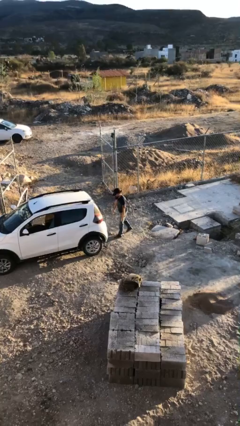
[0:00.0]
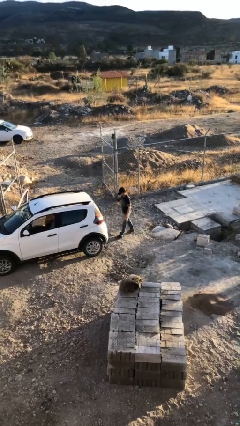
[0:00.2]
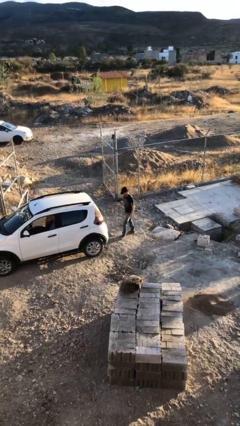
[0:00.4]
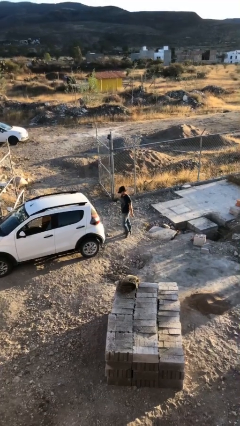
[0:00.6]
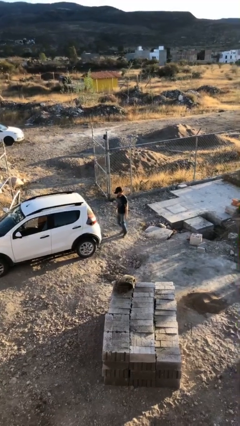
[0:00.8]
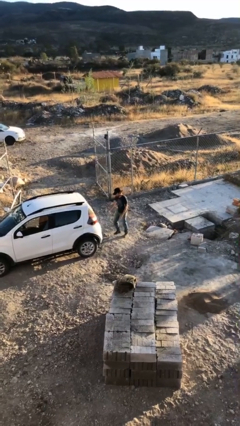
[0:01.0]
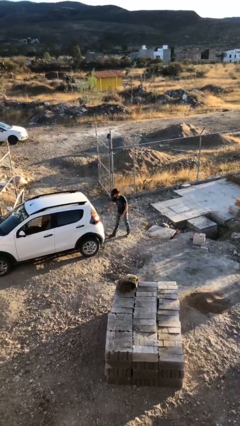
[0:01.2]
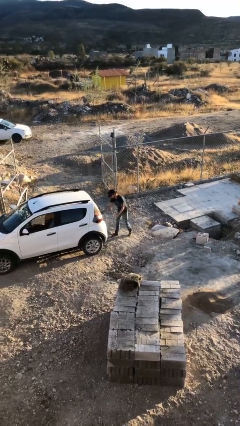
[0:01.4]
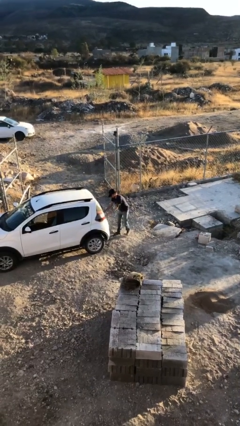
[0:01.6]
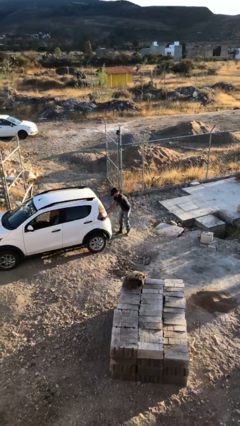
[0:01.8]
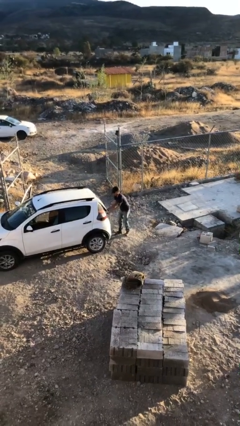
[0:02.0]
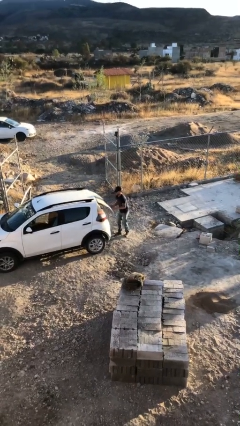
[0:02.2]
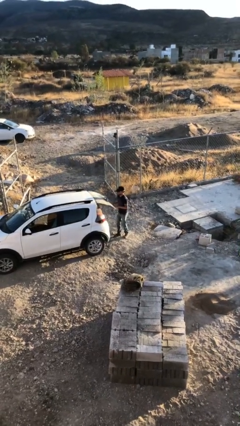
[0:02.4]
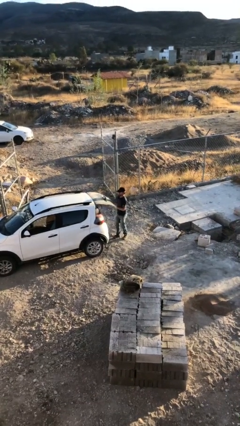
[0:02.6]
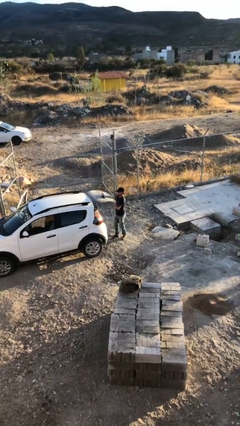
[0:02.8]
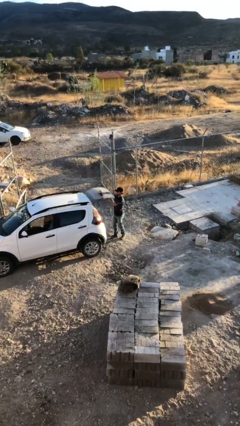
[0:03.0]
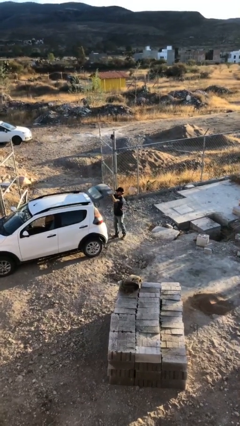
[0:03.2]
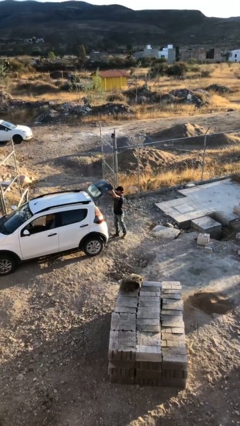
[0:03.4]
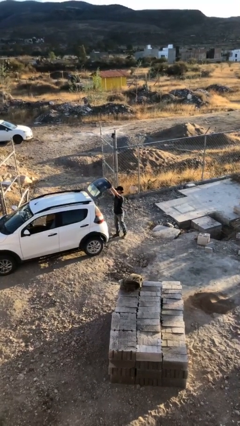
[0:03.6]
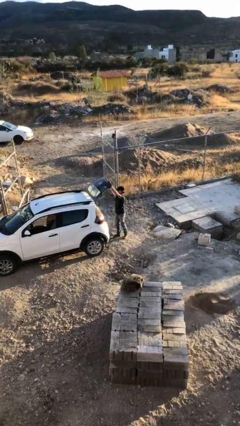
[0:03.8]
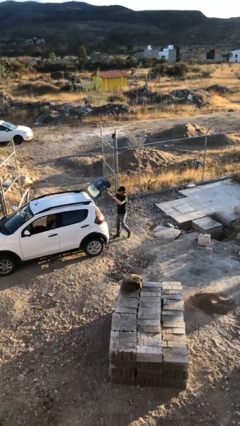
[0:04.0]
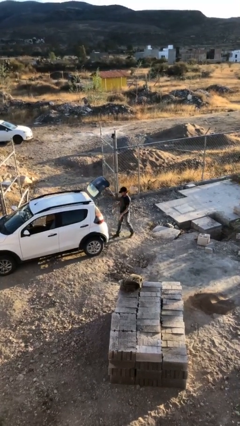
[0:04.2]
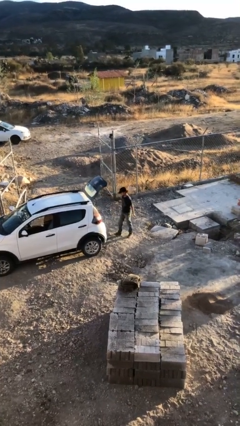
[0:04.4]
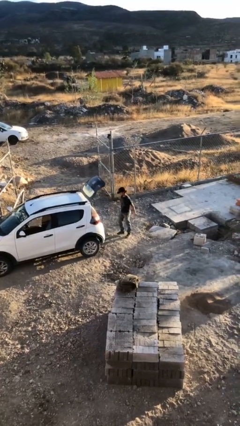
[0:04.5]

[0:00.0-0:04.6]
person opens car trunk

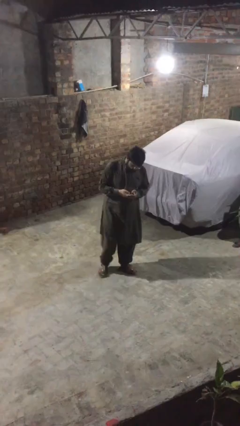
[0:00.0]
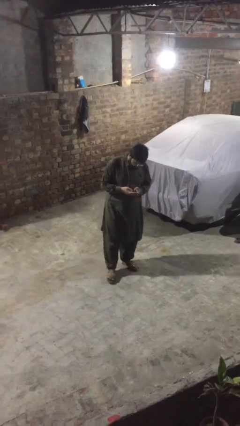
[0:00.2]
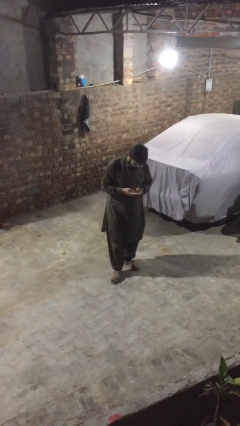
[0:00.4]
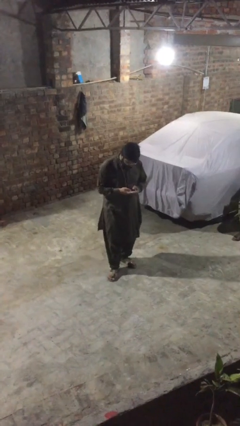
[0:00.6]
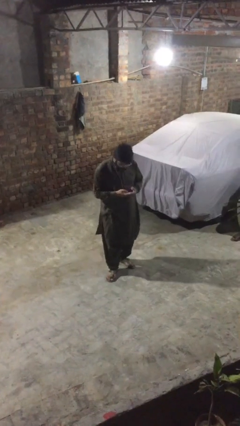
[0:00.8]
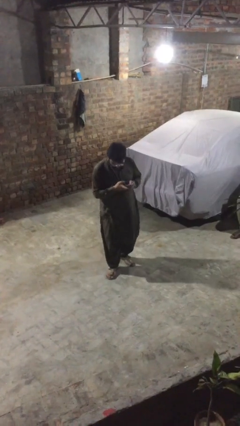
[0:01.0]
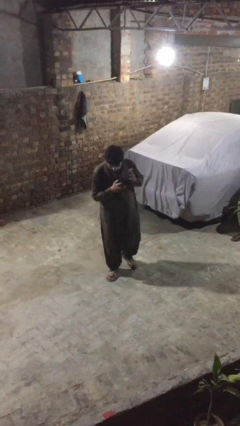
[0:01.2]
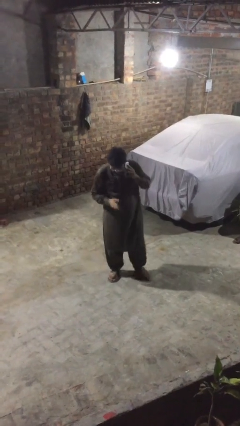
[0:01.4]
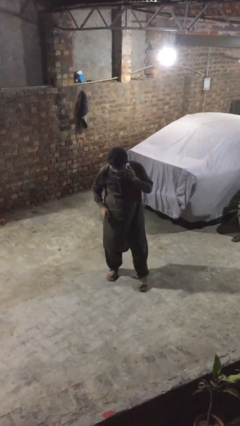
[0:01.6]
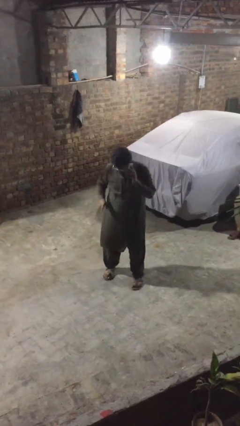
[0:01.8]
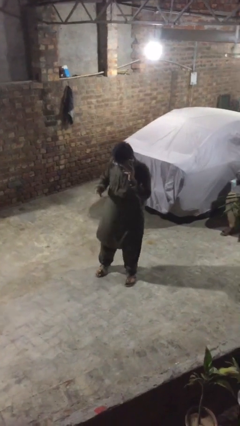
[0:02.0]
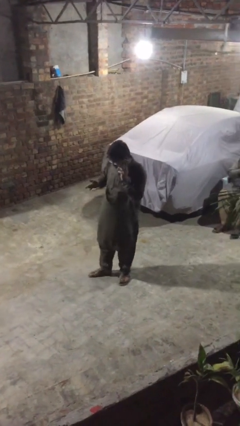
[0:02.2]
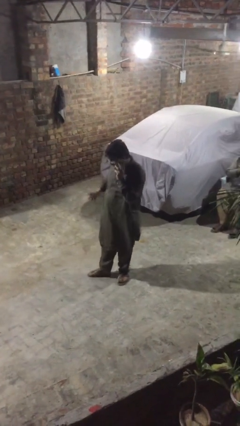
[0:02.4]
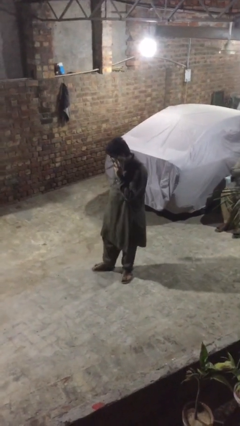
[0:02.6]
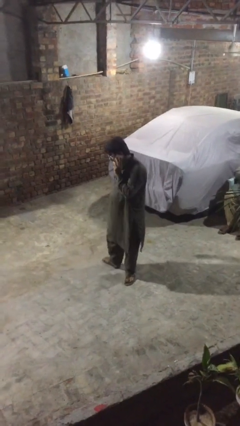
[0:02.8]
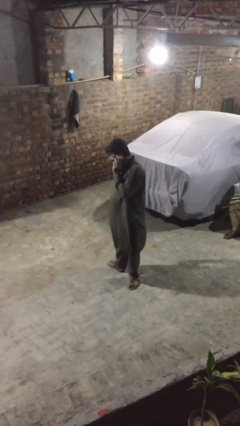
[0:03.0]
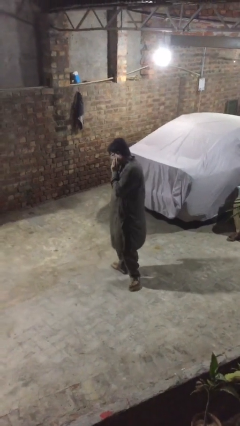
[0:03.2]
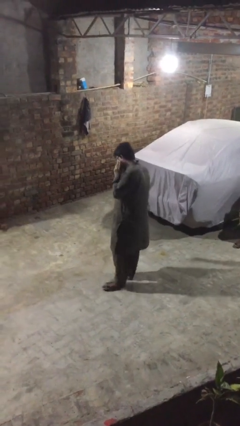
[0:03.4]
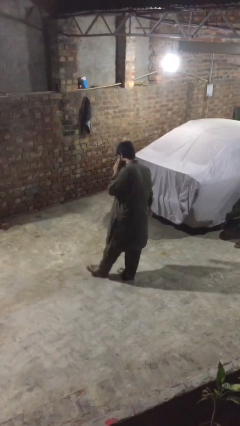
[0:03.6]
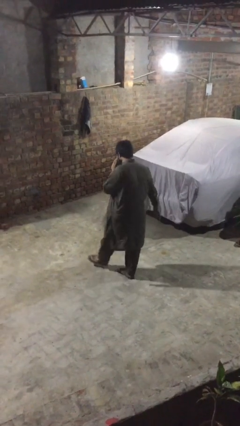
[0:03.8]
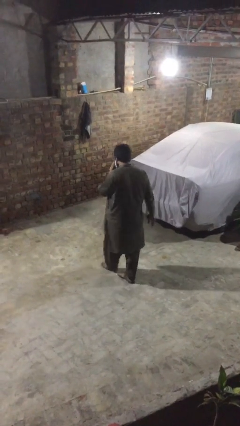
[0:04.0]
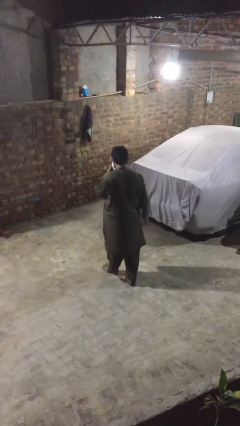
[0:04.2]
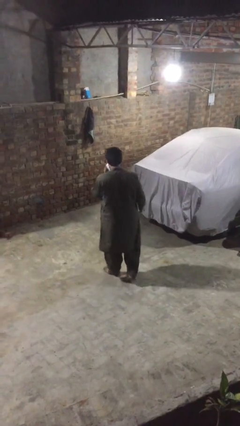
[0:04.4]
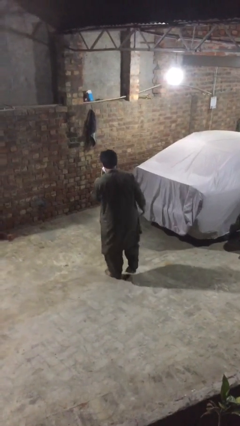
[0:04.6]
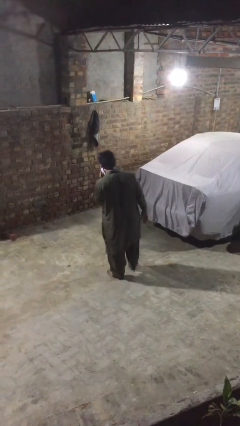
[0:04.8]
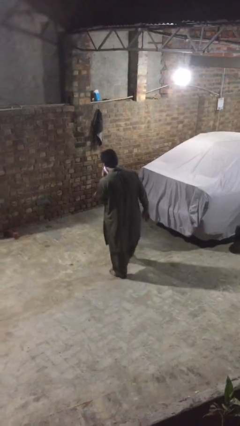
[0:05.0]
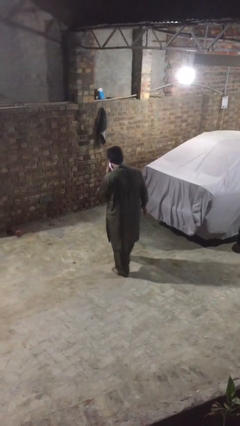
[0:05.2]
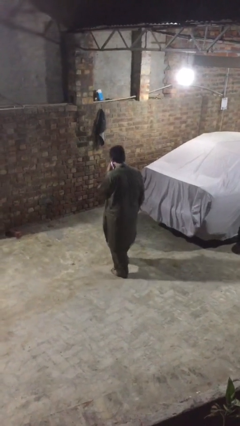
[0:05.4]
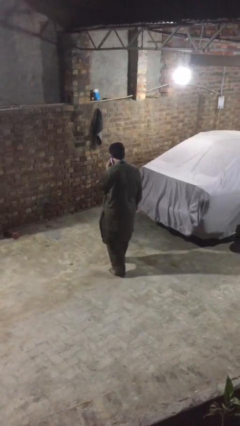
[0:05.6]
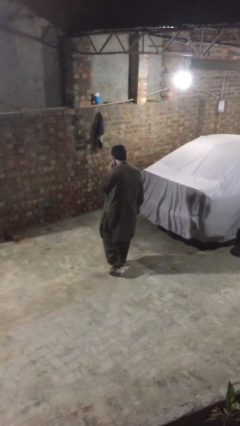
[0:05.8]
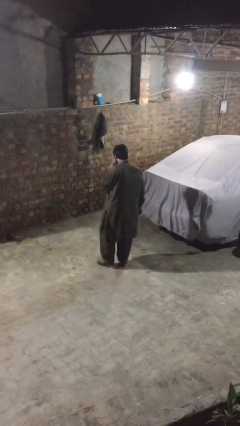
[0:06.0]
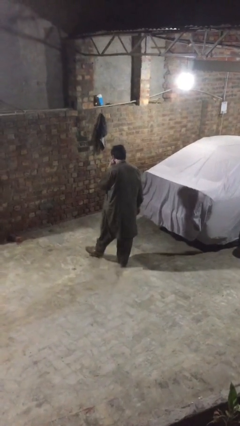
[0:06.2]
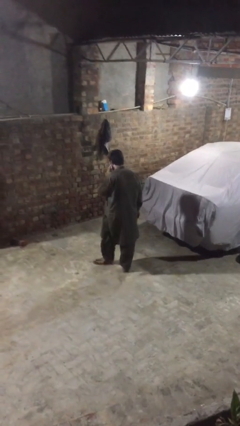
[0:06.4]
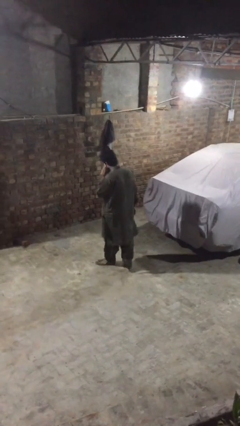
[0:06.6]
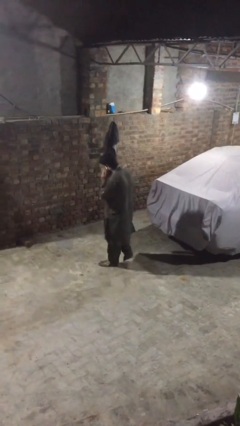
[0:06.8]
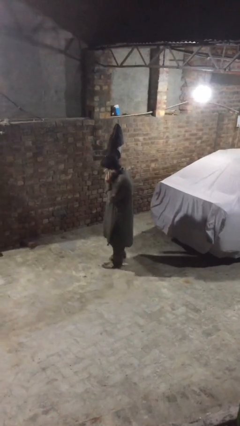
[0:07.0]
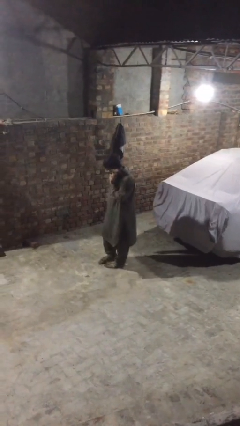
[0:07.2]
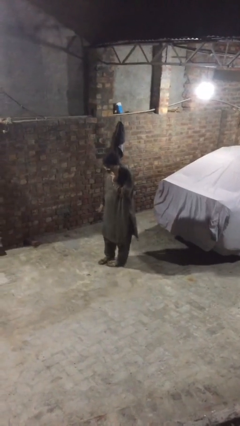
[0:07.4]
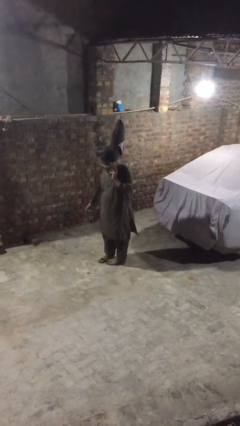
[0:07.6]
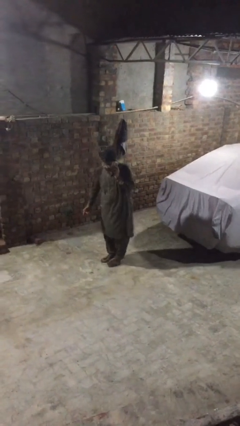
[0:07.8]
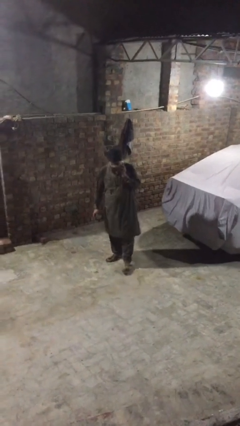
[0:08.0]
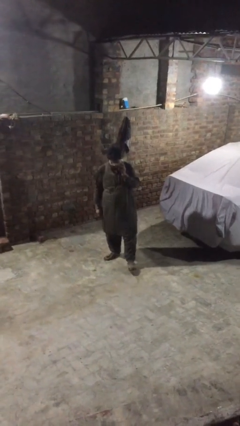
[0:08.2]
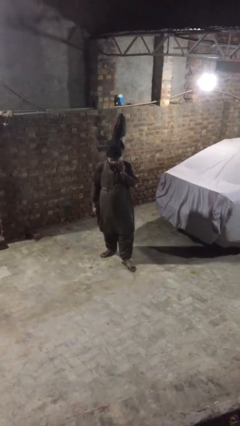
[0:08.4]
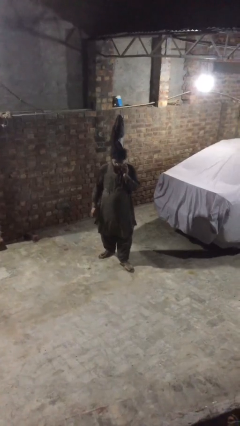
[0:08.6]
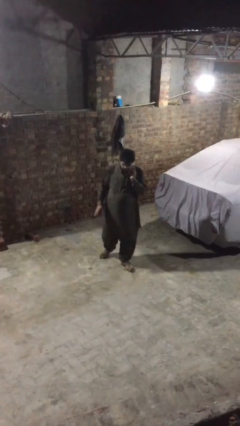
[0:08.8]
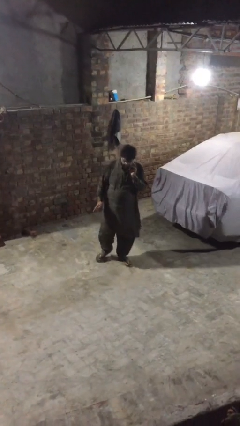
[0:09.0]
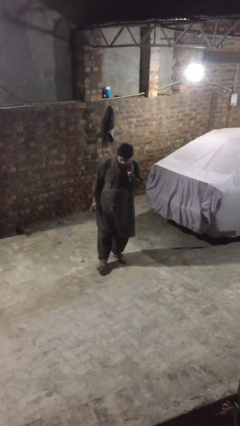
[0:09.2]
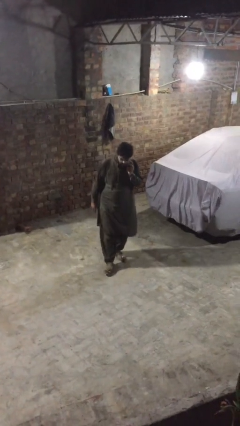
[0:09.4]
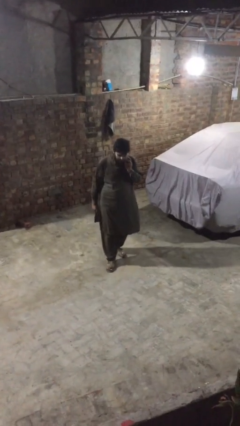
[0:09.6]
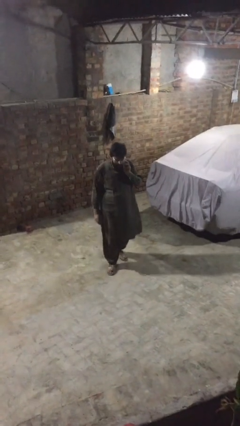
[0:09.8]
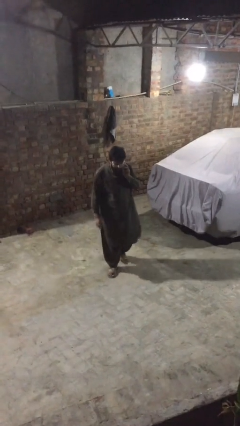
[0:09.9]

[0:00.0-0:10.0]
person talks on phone

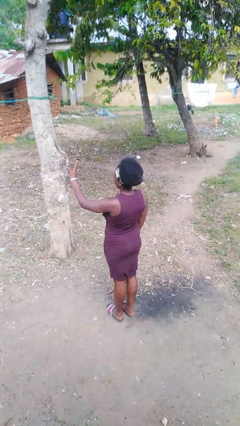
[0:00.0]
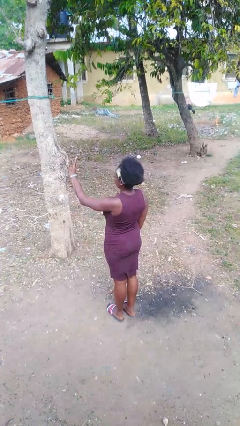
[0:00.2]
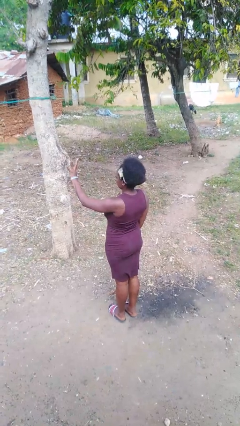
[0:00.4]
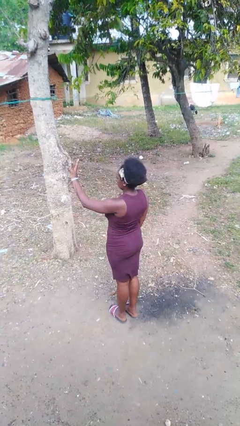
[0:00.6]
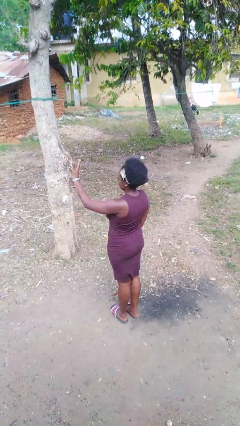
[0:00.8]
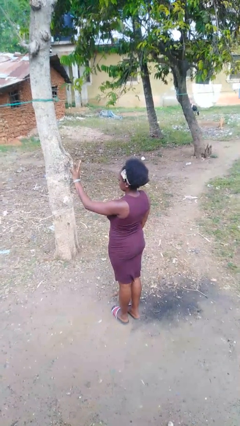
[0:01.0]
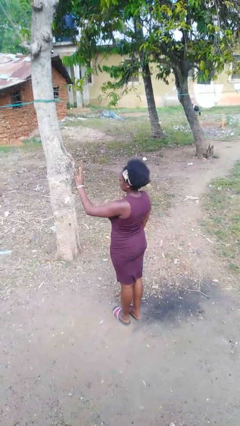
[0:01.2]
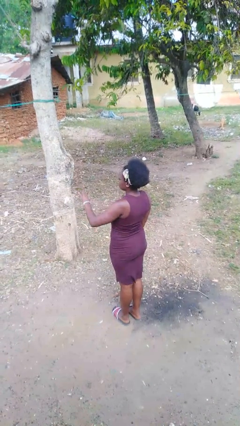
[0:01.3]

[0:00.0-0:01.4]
person gestures number four

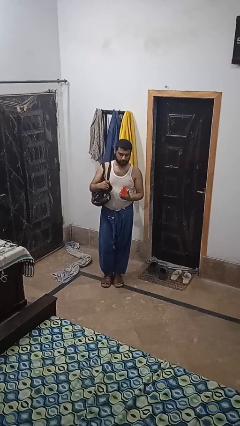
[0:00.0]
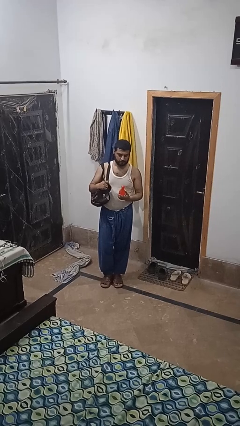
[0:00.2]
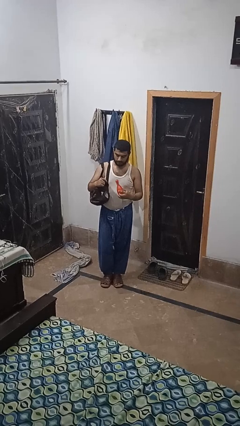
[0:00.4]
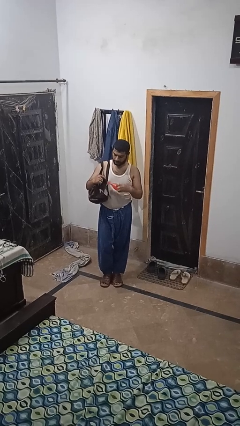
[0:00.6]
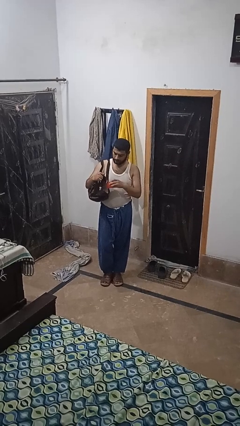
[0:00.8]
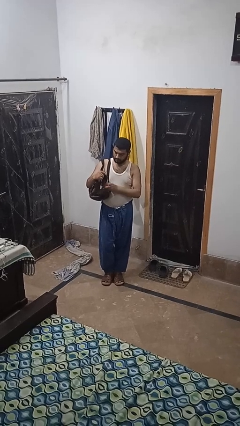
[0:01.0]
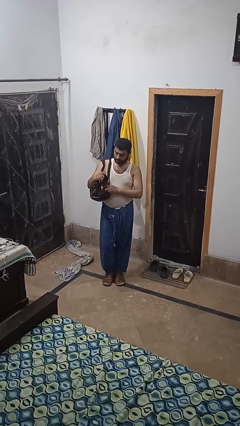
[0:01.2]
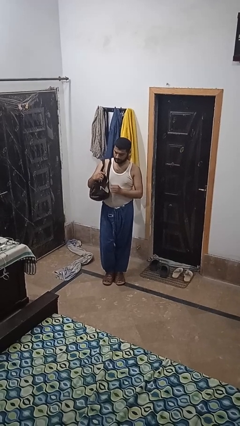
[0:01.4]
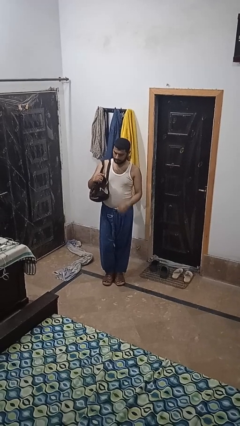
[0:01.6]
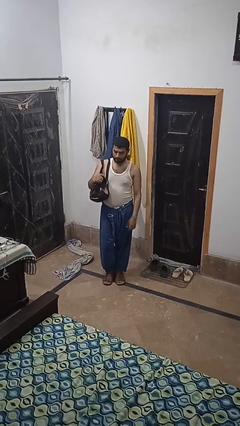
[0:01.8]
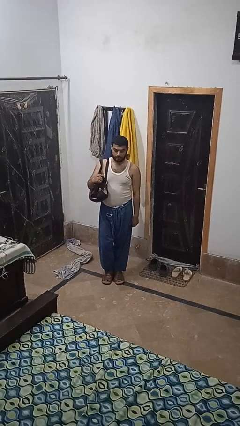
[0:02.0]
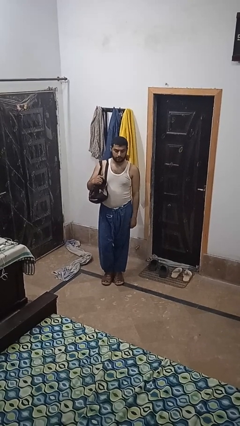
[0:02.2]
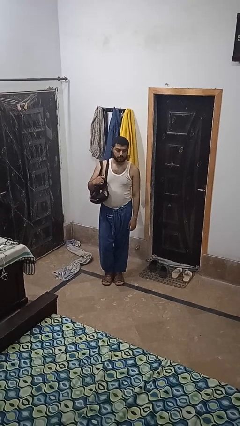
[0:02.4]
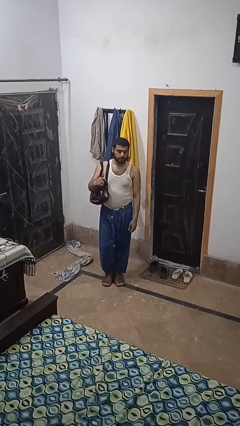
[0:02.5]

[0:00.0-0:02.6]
person puts object into purse
